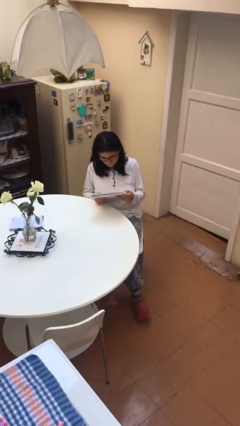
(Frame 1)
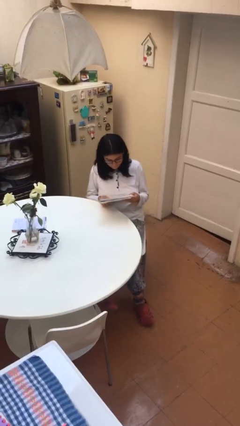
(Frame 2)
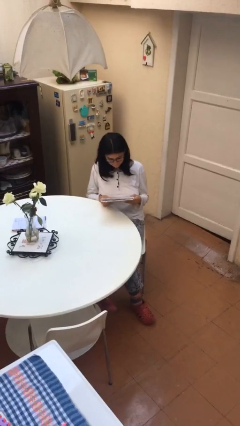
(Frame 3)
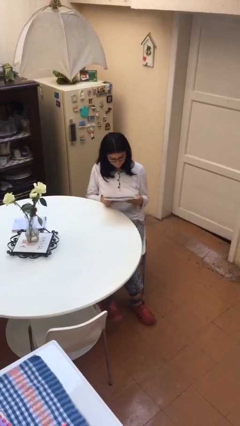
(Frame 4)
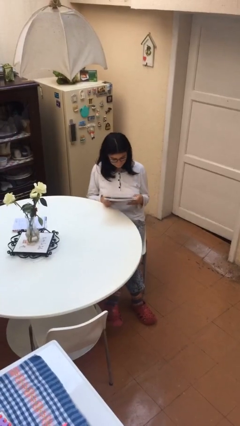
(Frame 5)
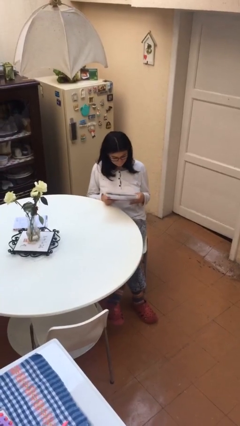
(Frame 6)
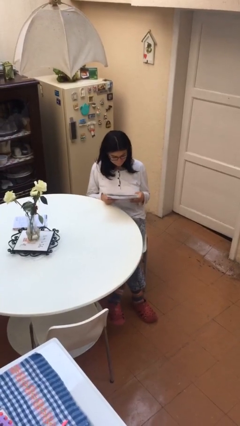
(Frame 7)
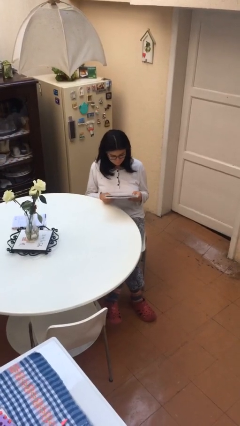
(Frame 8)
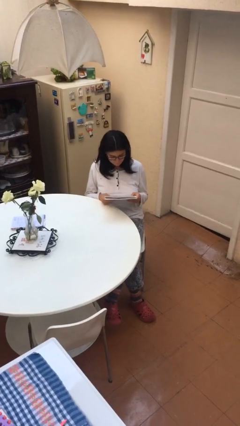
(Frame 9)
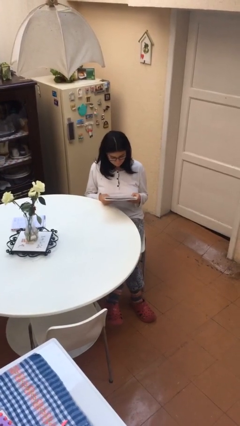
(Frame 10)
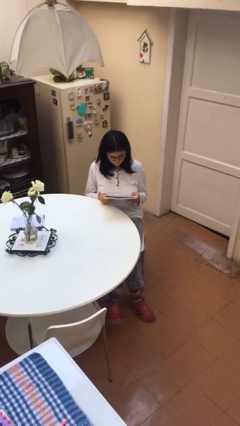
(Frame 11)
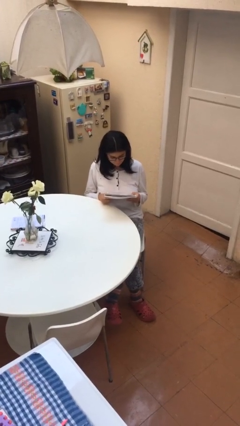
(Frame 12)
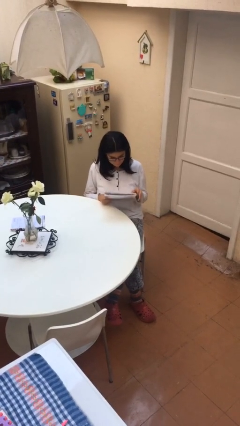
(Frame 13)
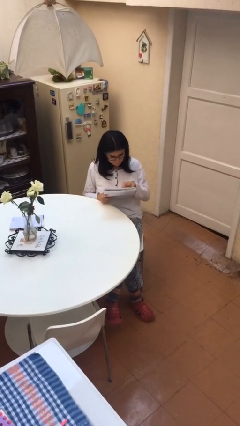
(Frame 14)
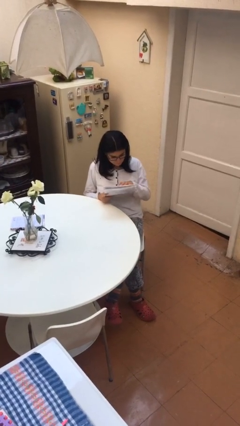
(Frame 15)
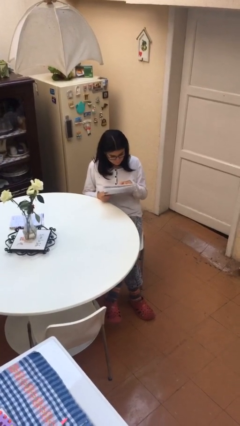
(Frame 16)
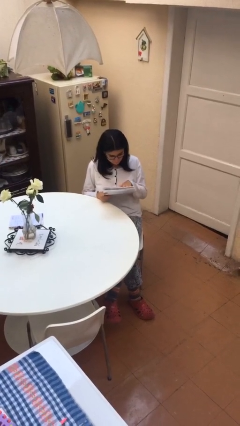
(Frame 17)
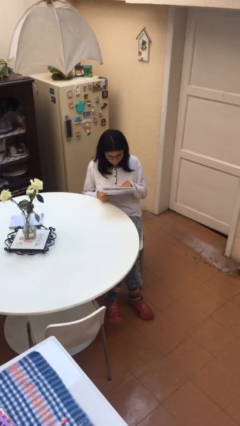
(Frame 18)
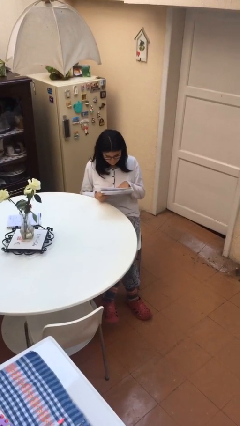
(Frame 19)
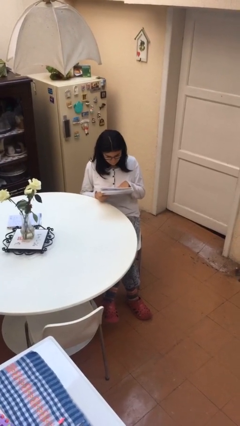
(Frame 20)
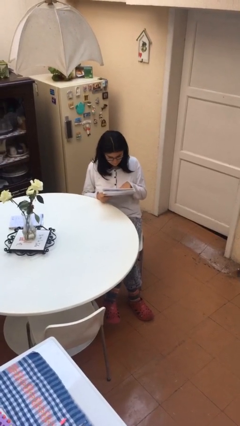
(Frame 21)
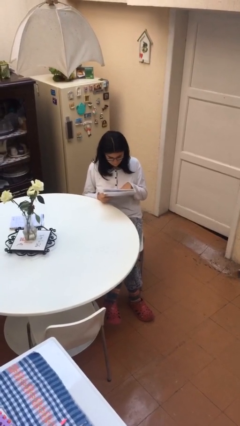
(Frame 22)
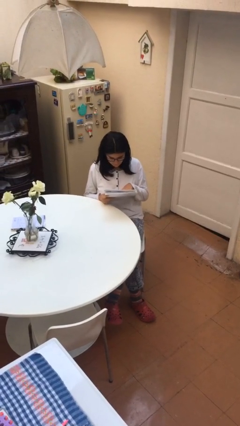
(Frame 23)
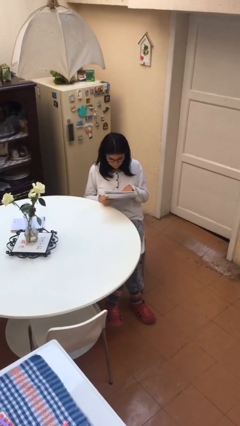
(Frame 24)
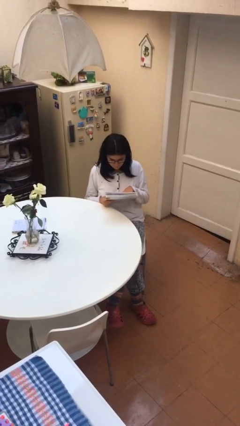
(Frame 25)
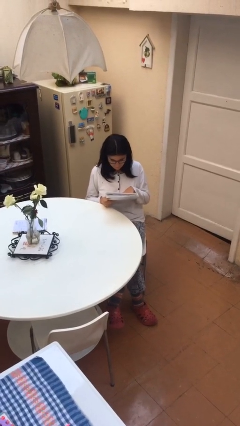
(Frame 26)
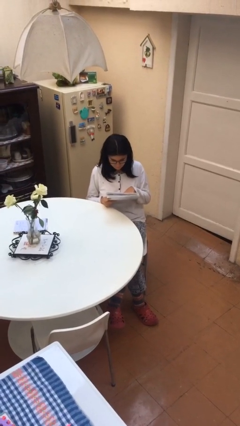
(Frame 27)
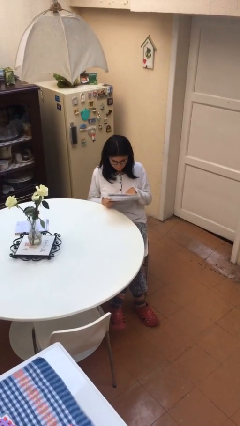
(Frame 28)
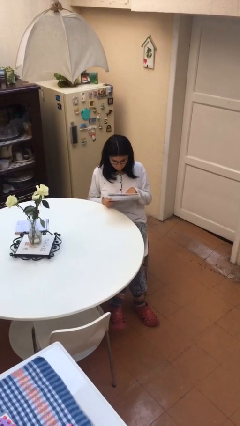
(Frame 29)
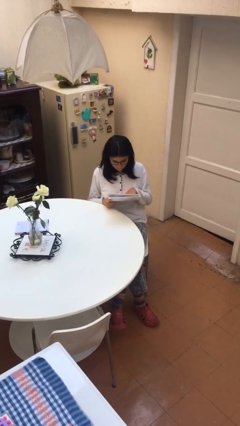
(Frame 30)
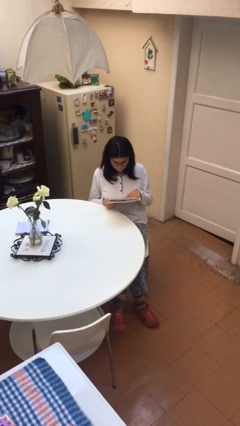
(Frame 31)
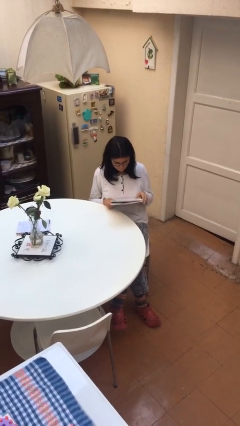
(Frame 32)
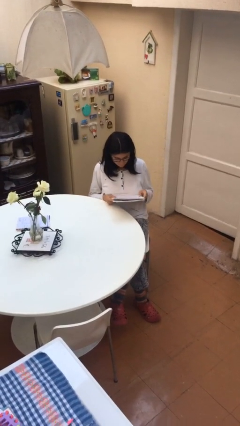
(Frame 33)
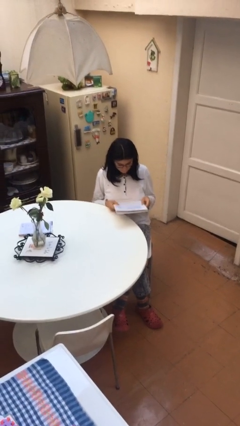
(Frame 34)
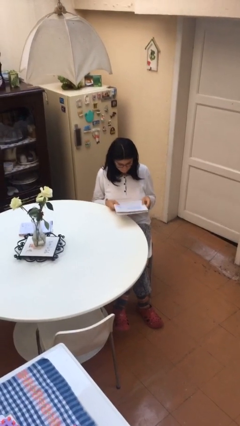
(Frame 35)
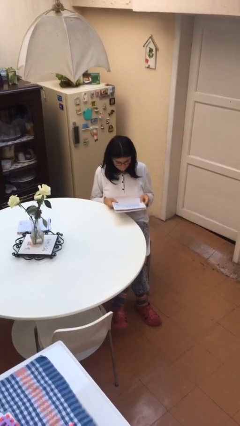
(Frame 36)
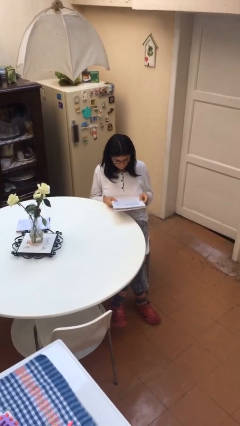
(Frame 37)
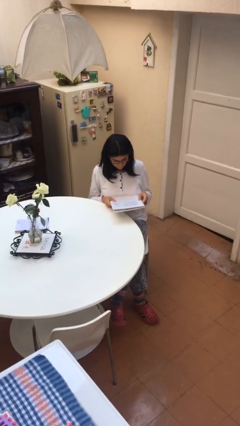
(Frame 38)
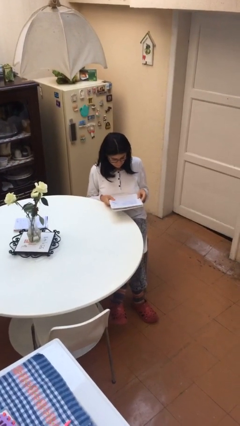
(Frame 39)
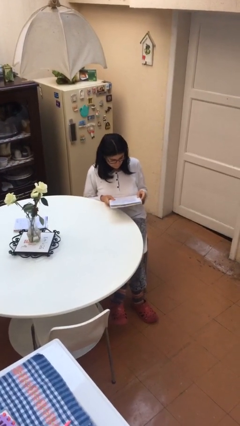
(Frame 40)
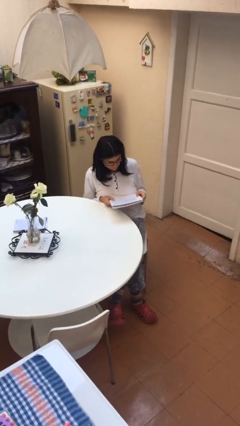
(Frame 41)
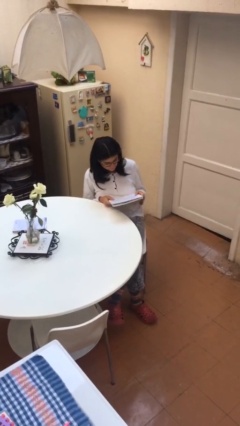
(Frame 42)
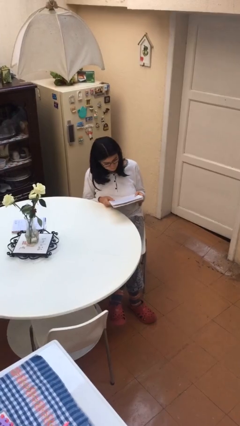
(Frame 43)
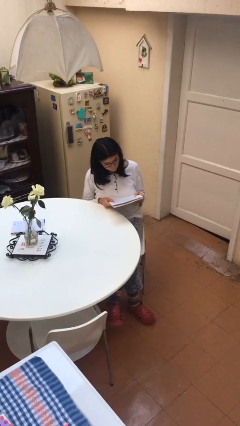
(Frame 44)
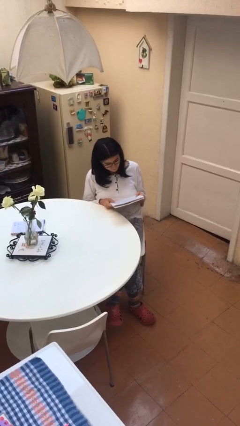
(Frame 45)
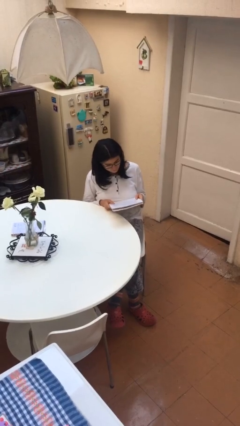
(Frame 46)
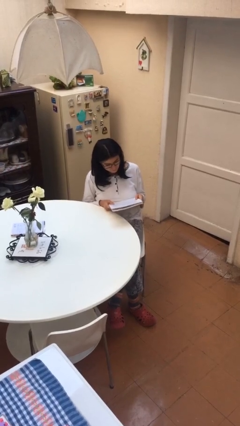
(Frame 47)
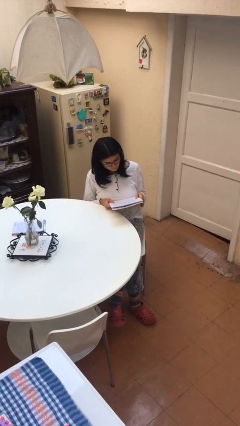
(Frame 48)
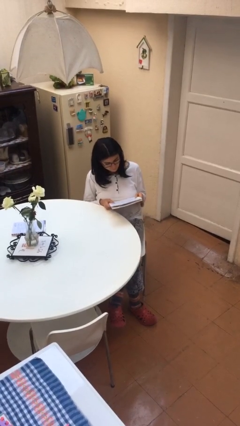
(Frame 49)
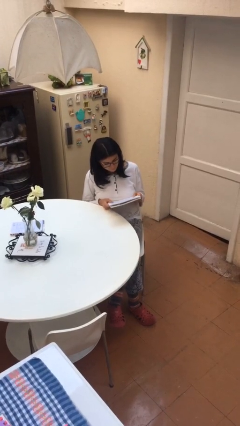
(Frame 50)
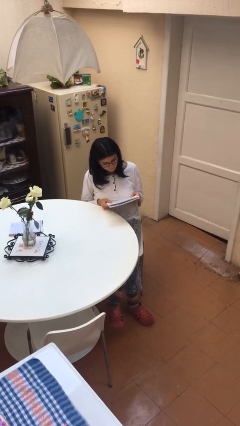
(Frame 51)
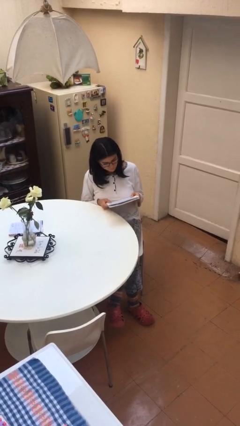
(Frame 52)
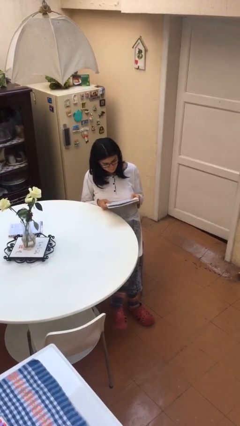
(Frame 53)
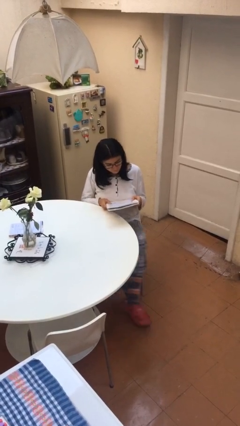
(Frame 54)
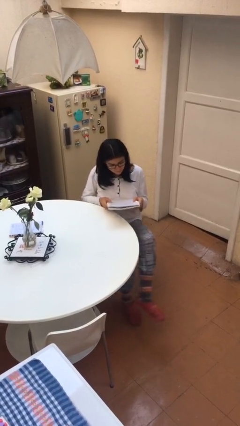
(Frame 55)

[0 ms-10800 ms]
person reads document

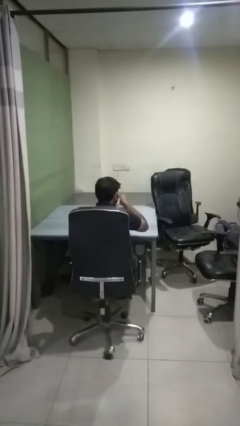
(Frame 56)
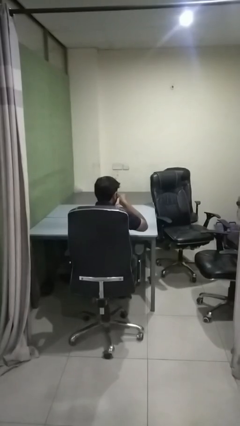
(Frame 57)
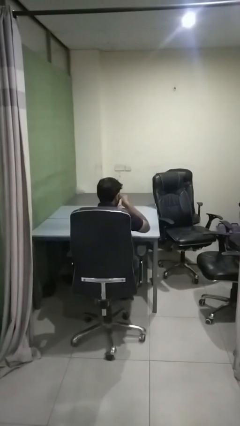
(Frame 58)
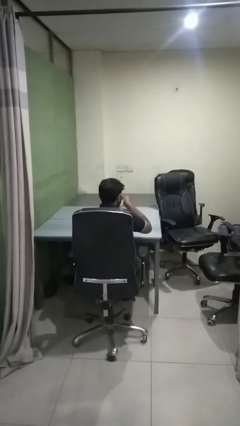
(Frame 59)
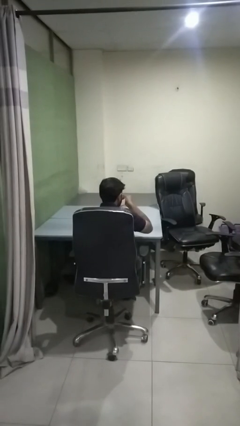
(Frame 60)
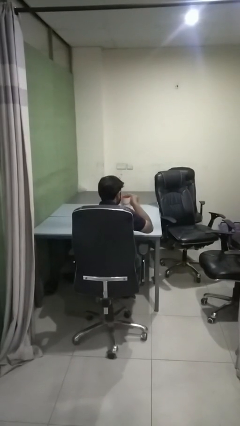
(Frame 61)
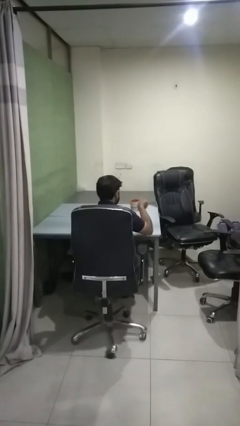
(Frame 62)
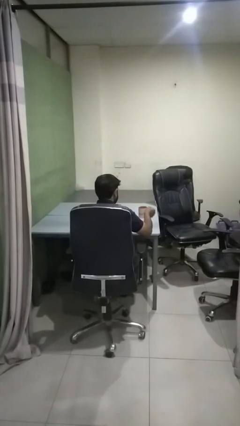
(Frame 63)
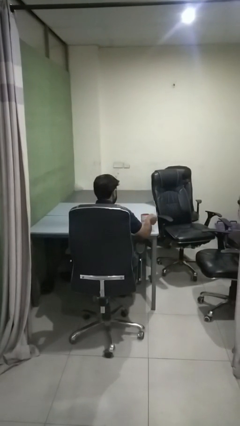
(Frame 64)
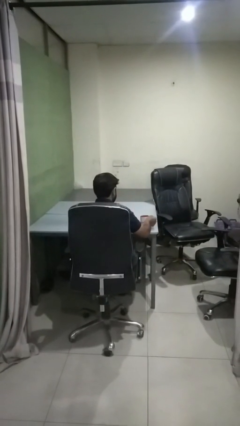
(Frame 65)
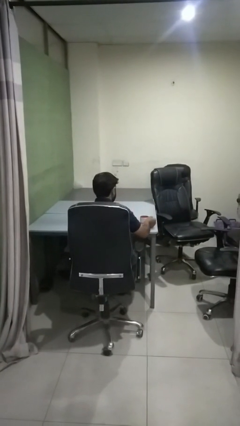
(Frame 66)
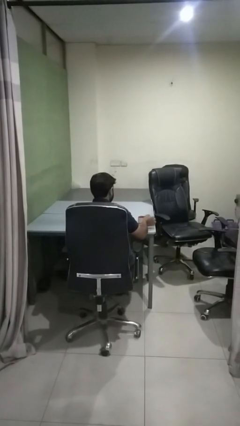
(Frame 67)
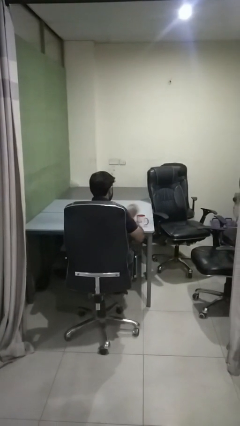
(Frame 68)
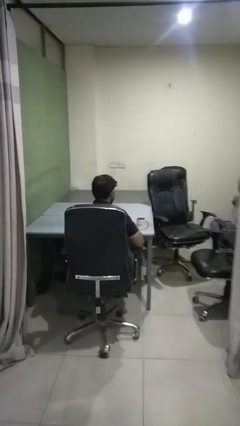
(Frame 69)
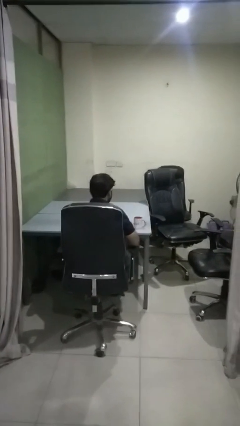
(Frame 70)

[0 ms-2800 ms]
person puts down object on table

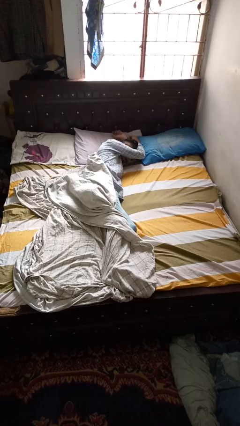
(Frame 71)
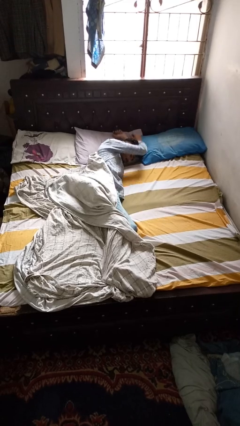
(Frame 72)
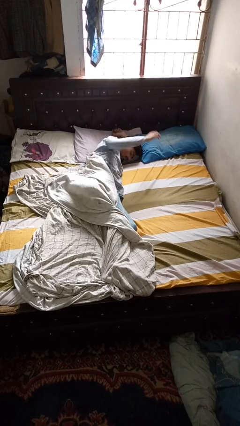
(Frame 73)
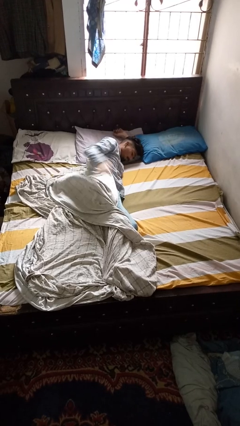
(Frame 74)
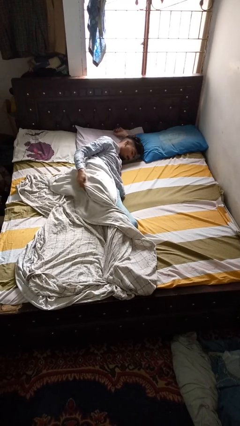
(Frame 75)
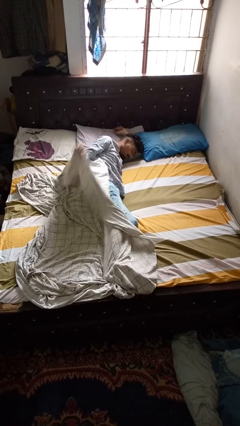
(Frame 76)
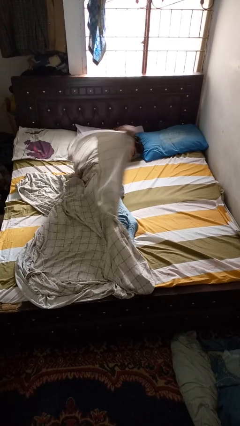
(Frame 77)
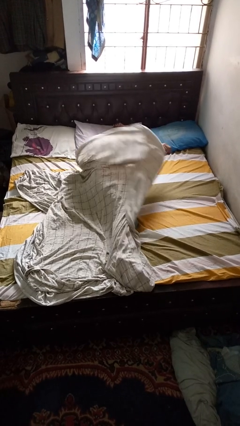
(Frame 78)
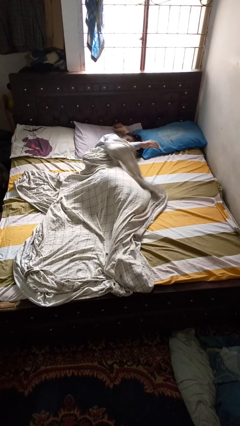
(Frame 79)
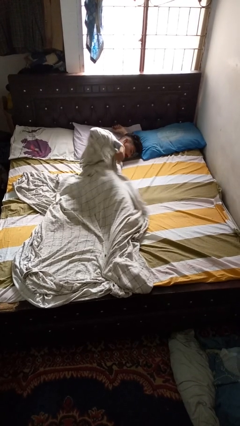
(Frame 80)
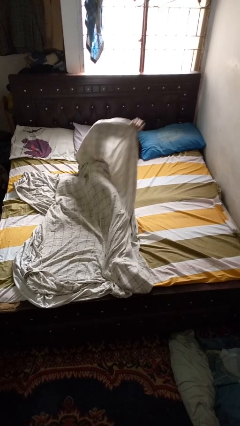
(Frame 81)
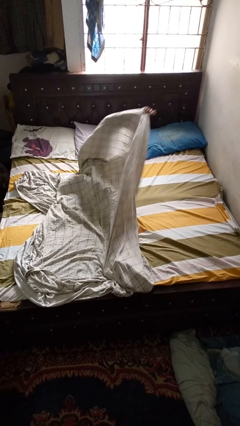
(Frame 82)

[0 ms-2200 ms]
person covers with bedsheets

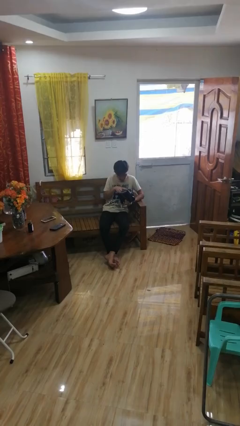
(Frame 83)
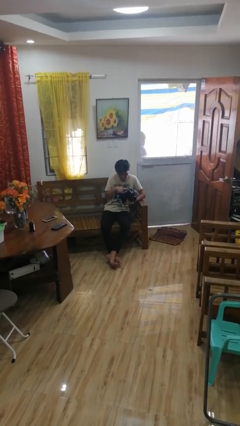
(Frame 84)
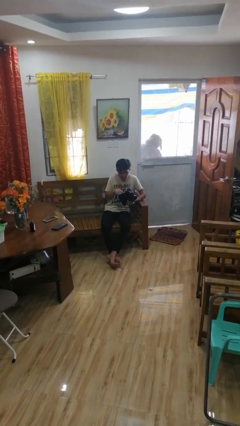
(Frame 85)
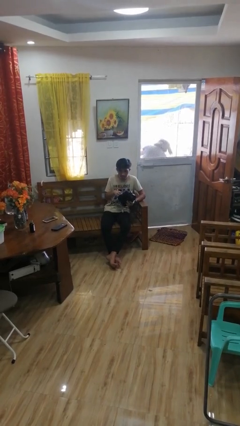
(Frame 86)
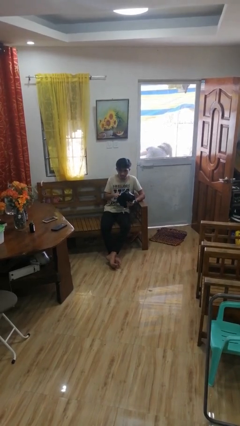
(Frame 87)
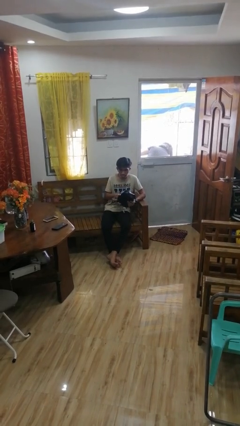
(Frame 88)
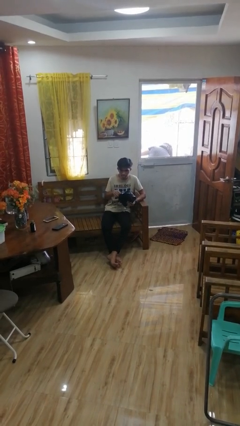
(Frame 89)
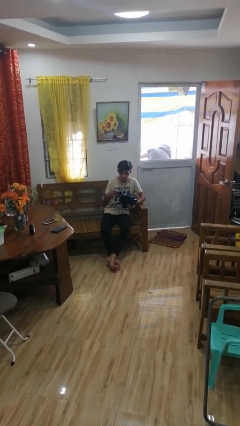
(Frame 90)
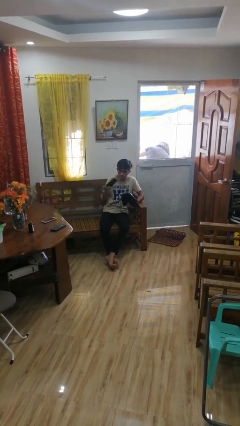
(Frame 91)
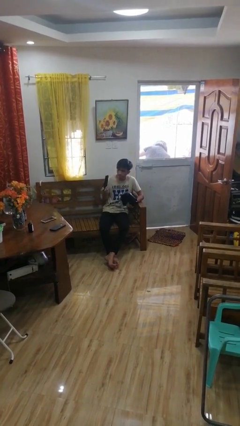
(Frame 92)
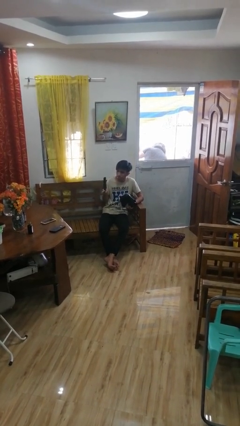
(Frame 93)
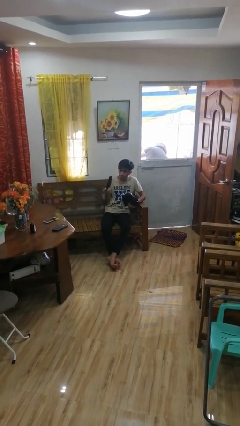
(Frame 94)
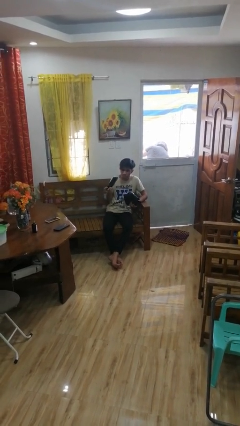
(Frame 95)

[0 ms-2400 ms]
person takes object from purse
